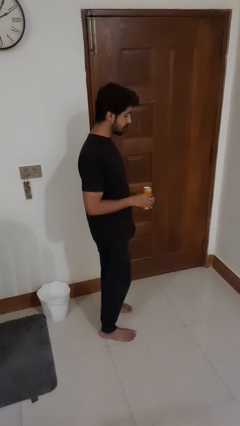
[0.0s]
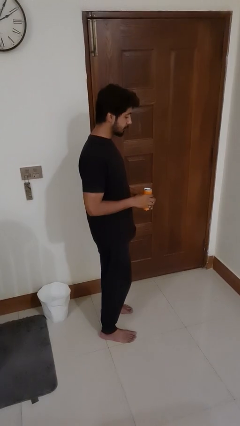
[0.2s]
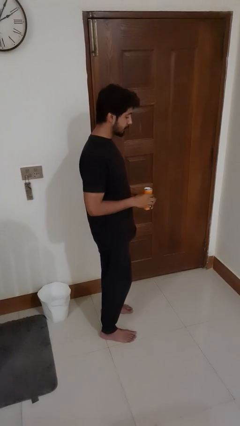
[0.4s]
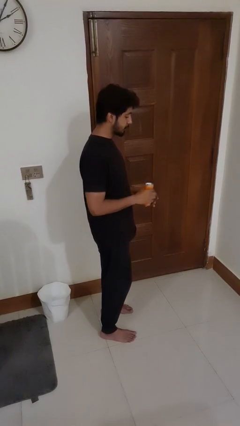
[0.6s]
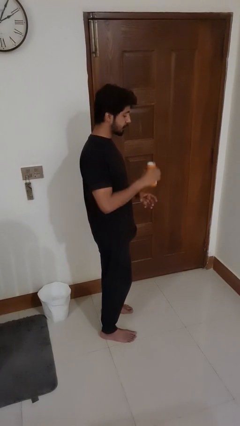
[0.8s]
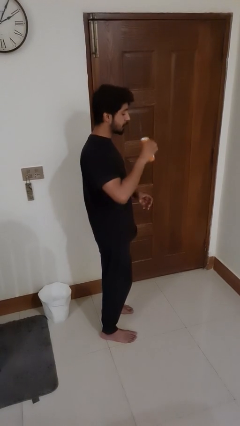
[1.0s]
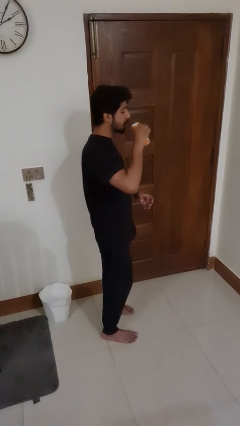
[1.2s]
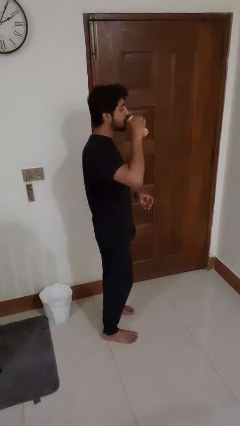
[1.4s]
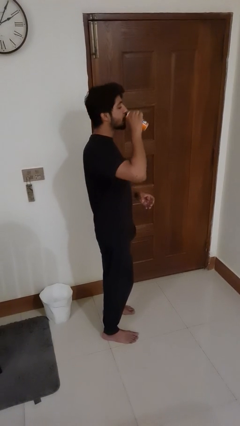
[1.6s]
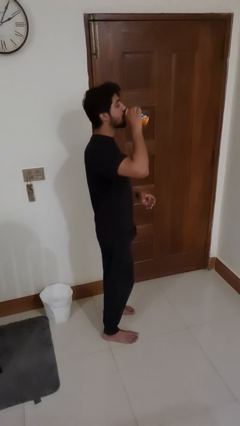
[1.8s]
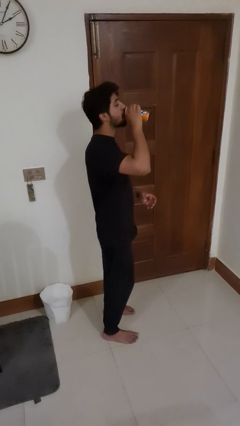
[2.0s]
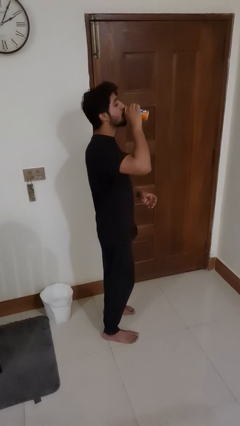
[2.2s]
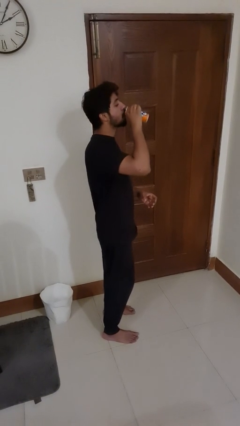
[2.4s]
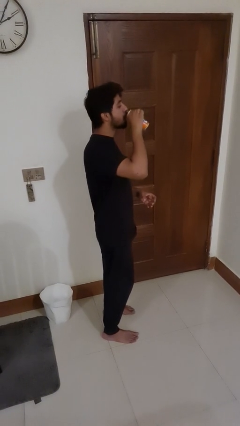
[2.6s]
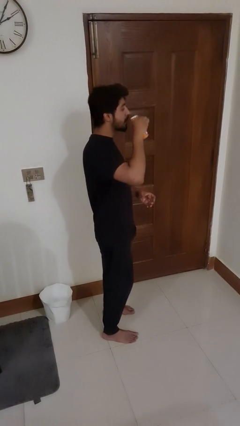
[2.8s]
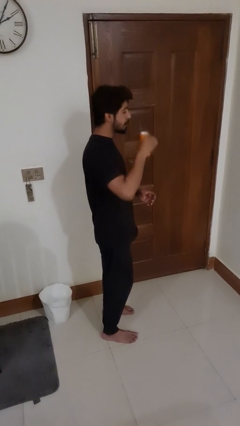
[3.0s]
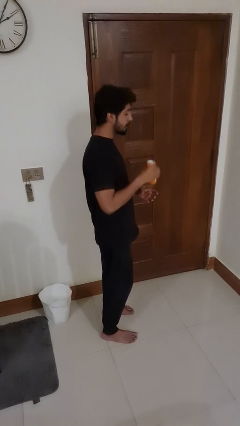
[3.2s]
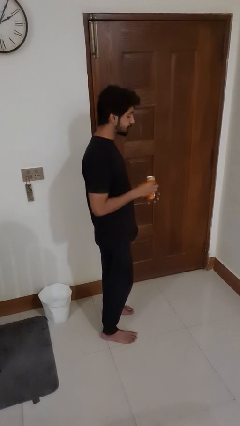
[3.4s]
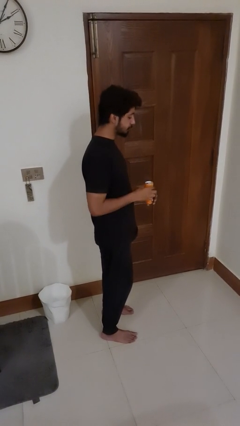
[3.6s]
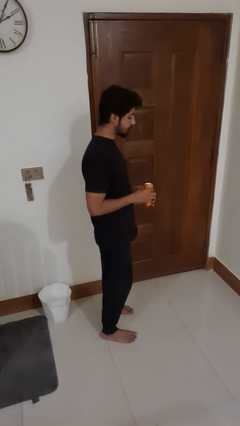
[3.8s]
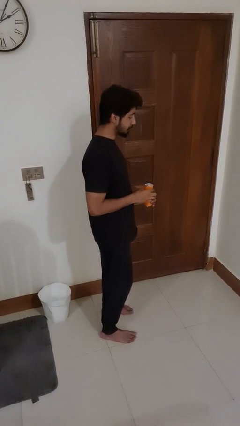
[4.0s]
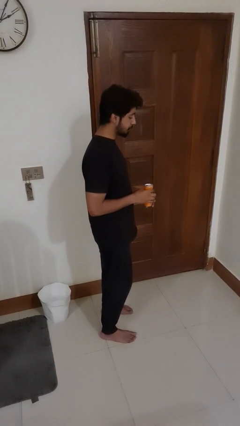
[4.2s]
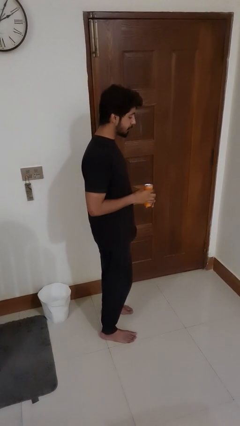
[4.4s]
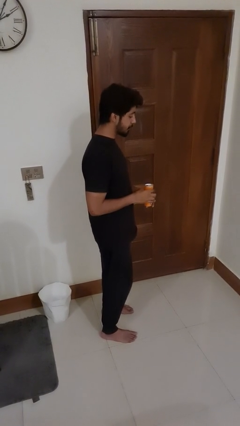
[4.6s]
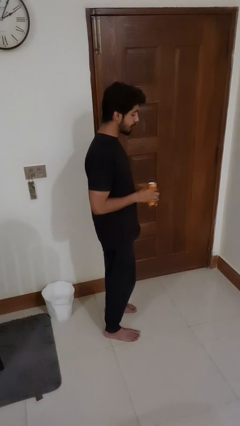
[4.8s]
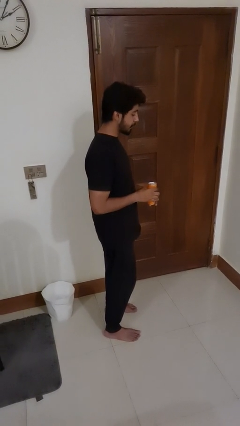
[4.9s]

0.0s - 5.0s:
person drinks from beverage can

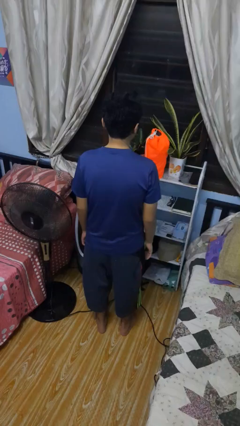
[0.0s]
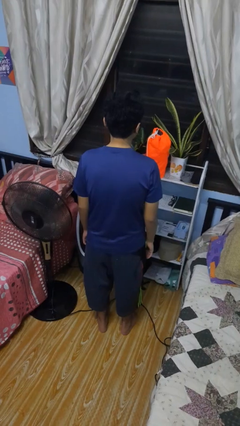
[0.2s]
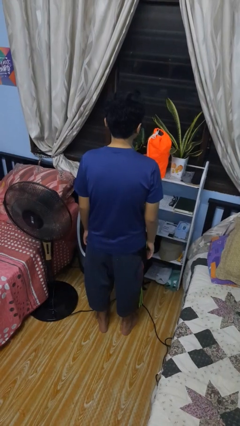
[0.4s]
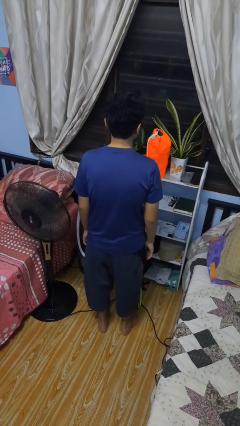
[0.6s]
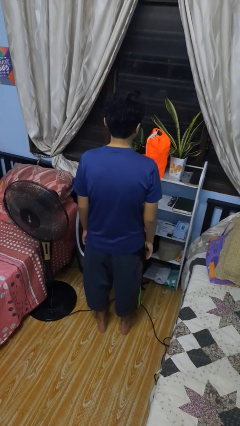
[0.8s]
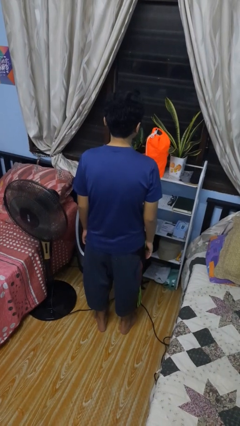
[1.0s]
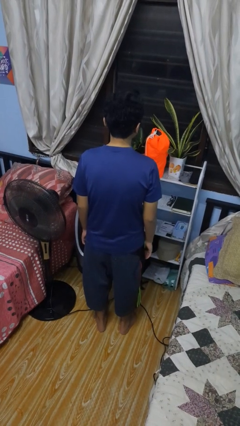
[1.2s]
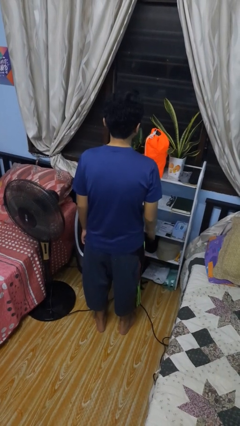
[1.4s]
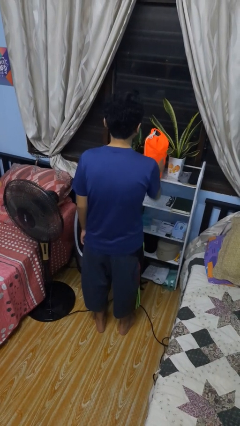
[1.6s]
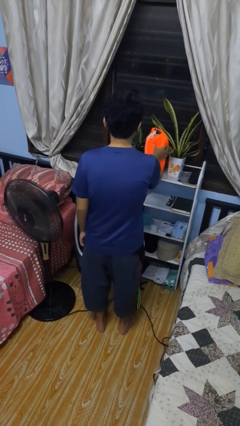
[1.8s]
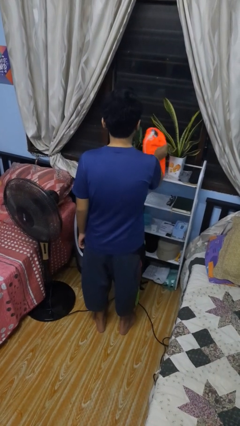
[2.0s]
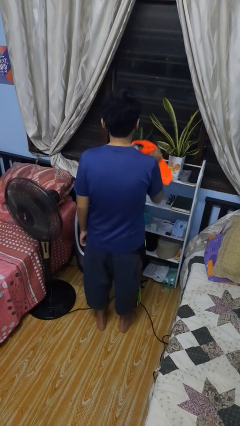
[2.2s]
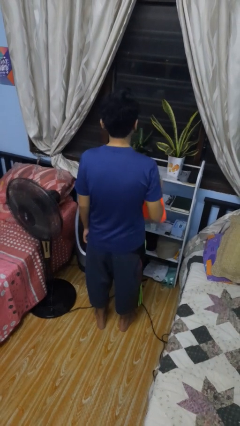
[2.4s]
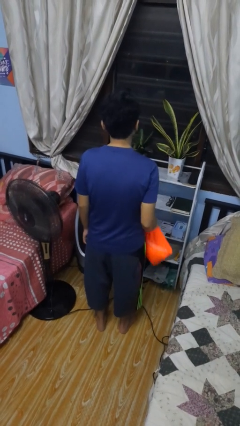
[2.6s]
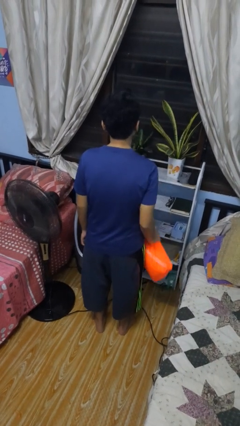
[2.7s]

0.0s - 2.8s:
person picks up object from countertop

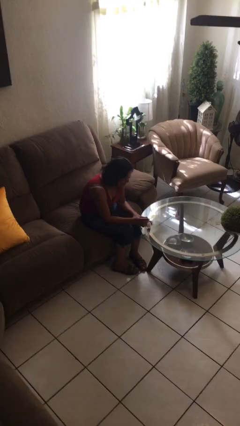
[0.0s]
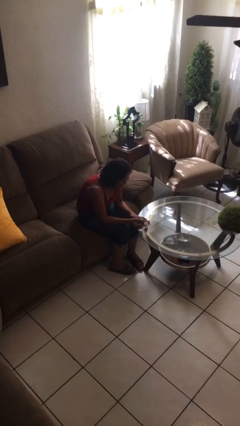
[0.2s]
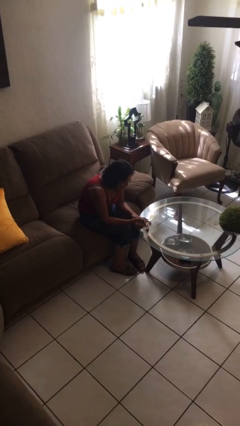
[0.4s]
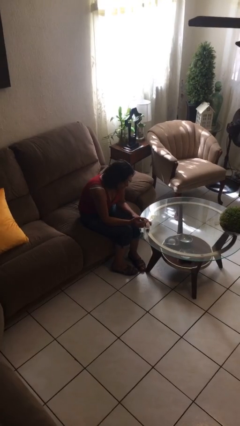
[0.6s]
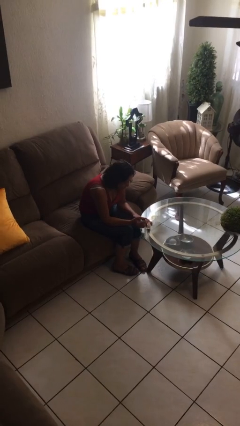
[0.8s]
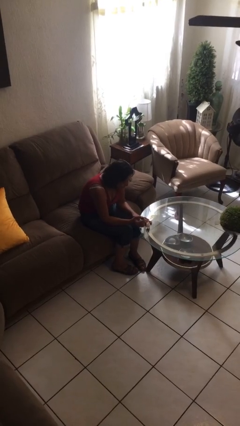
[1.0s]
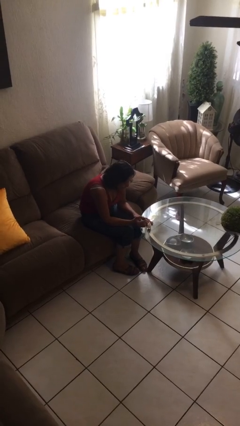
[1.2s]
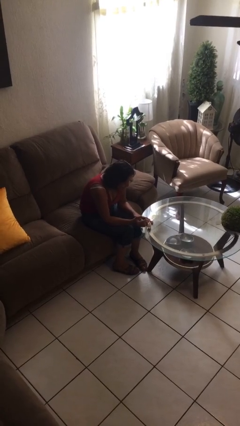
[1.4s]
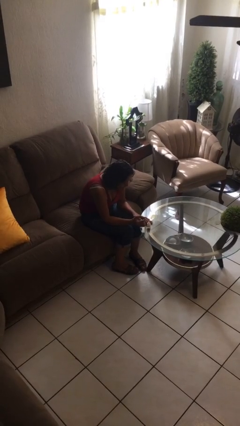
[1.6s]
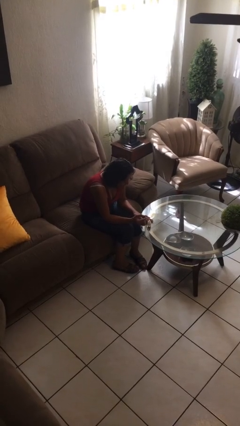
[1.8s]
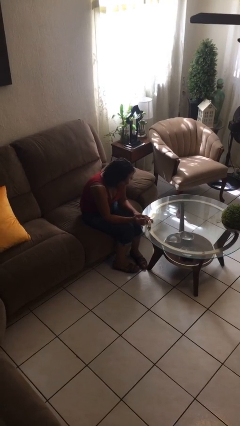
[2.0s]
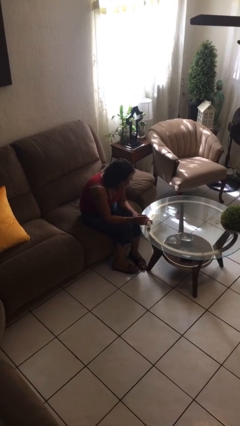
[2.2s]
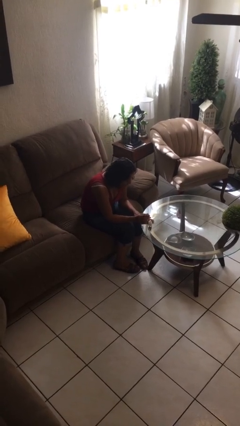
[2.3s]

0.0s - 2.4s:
person paints fingernails

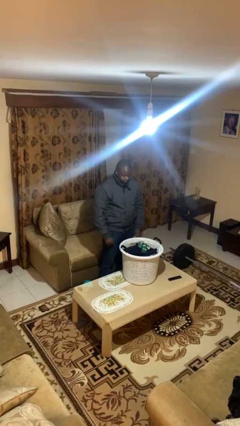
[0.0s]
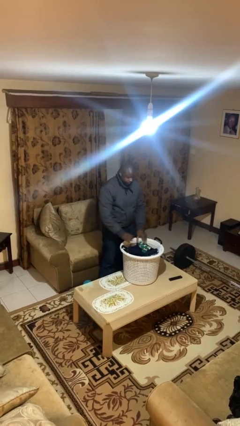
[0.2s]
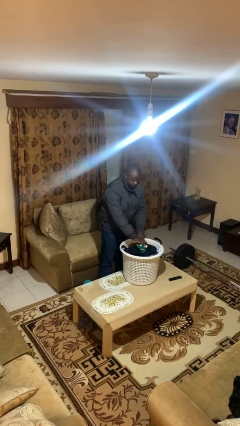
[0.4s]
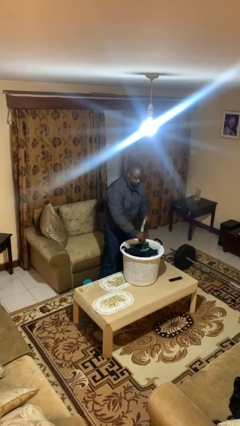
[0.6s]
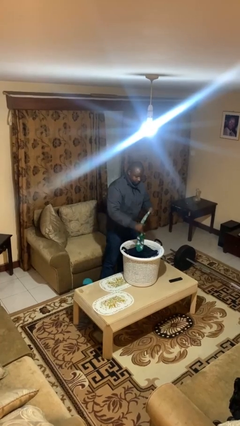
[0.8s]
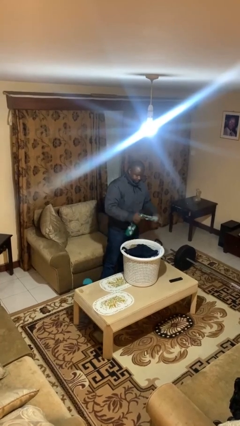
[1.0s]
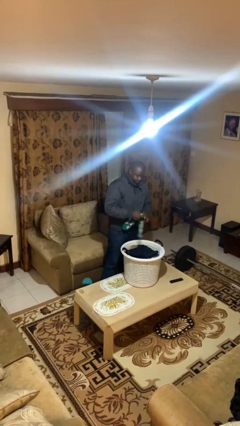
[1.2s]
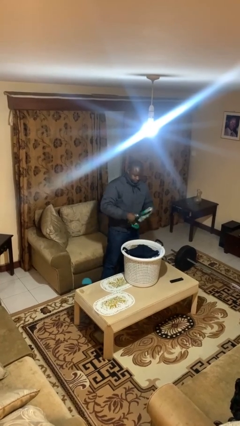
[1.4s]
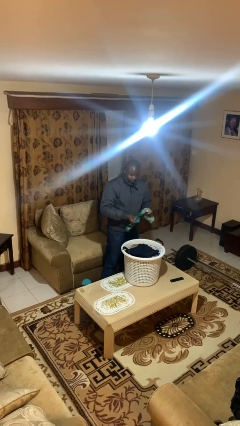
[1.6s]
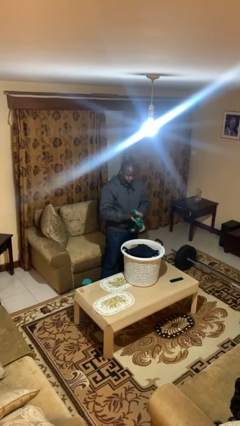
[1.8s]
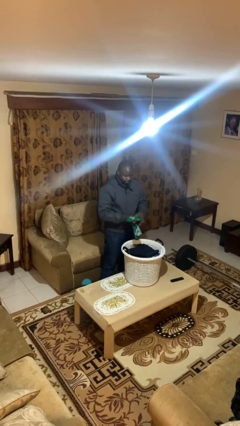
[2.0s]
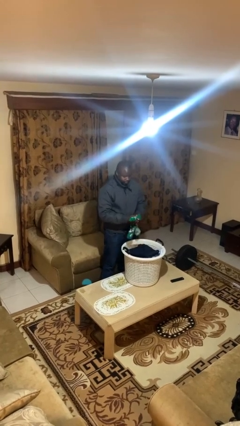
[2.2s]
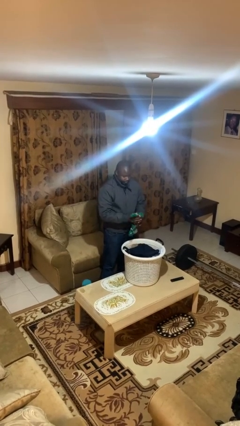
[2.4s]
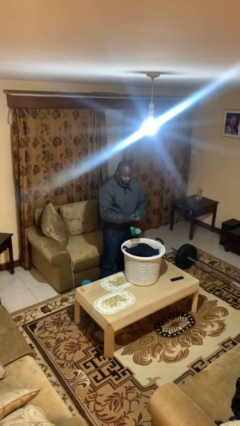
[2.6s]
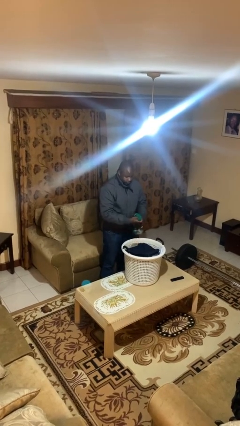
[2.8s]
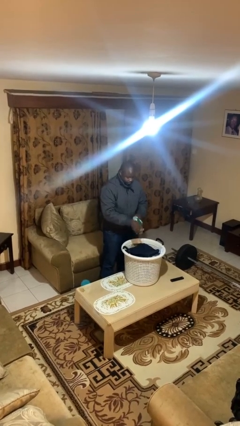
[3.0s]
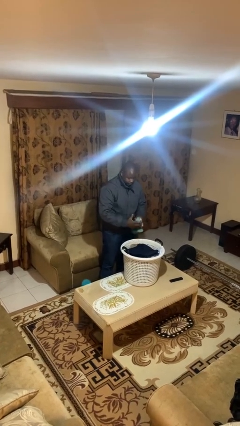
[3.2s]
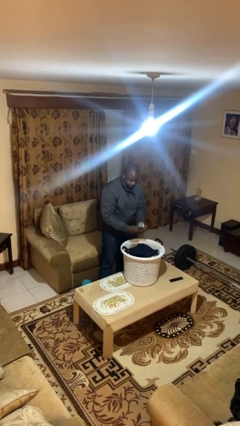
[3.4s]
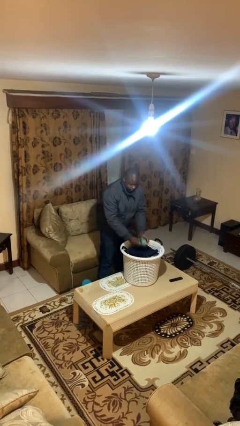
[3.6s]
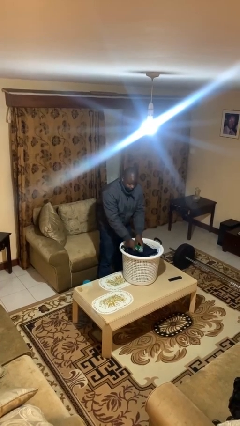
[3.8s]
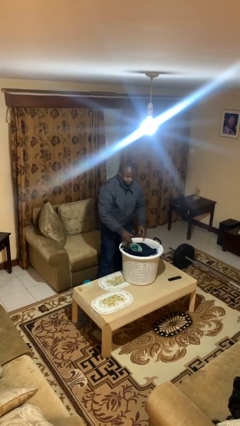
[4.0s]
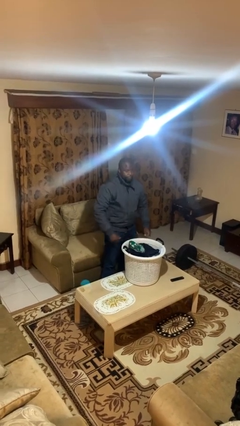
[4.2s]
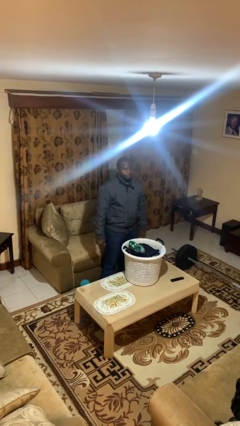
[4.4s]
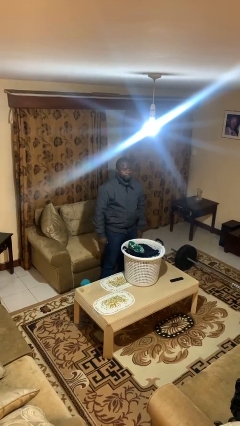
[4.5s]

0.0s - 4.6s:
person folds socks

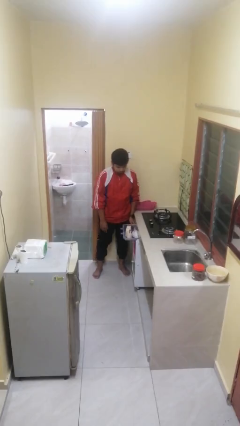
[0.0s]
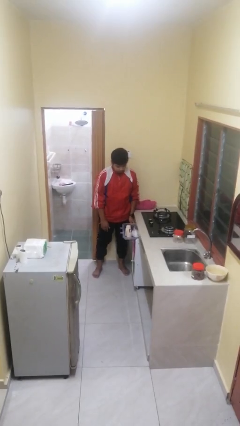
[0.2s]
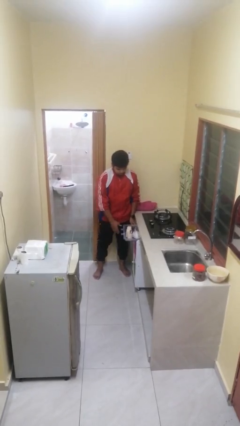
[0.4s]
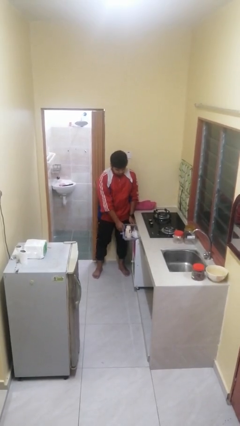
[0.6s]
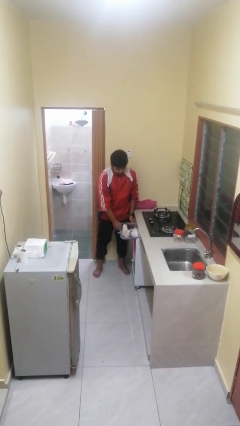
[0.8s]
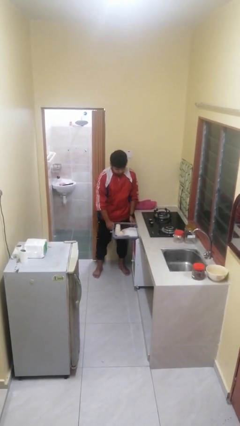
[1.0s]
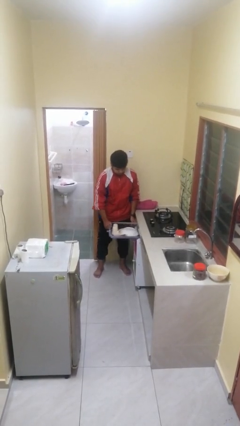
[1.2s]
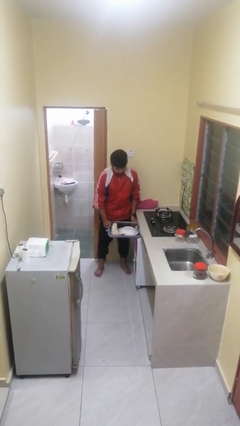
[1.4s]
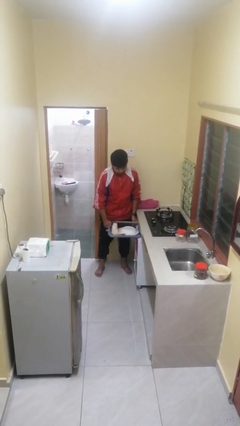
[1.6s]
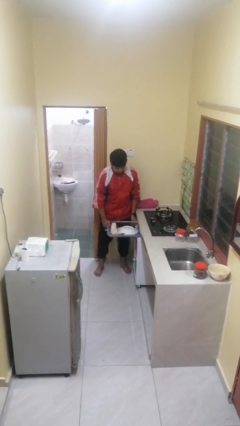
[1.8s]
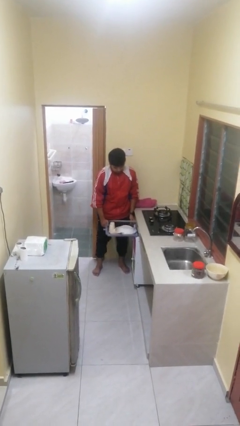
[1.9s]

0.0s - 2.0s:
person opens kitchen drawer

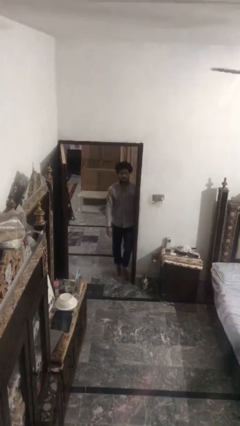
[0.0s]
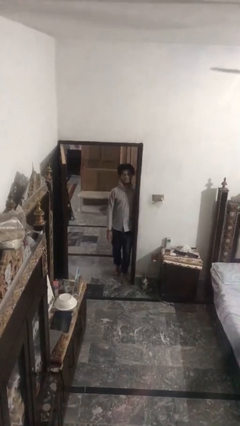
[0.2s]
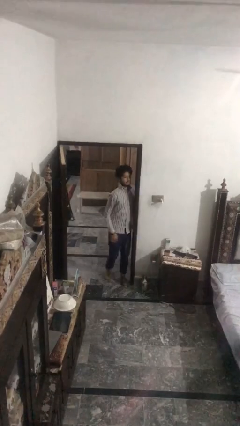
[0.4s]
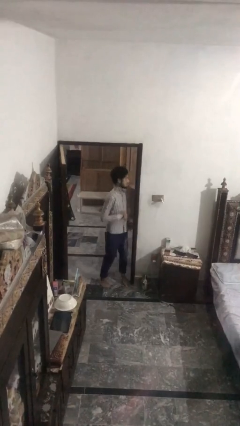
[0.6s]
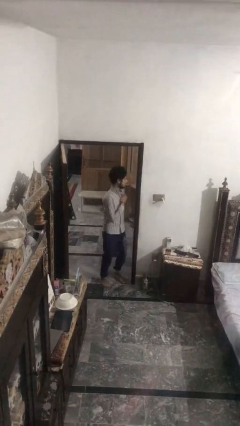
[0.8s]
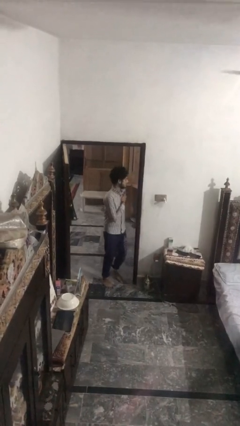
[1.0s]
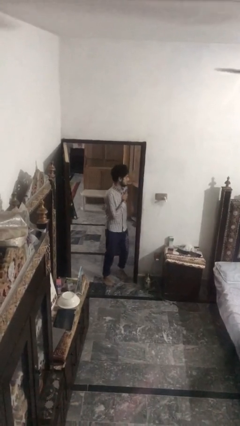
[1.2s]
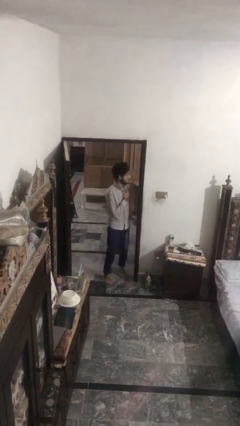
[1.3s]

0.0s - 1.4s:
person bumps into wall
